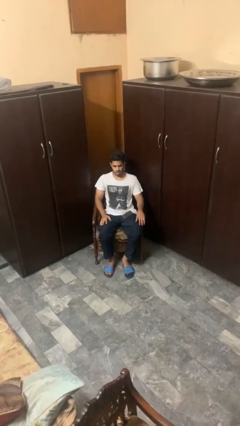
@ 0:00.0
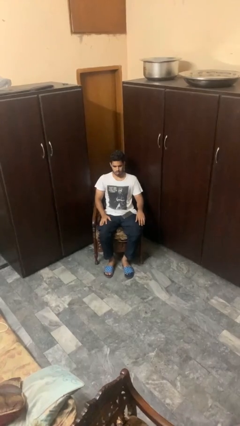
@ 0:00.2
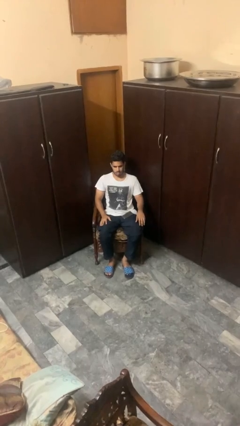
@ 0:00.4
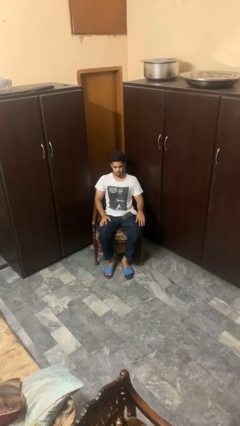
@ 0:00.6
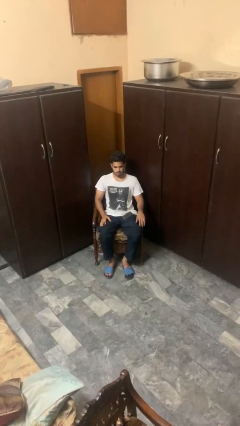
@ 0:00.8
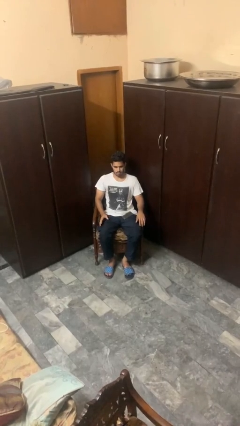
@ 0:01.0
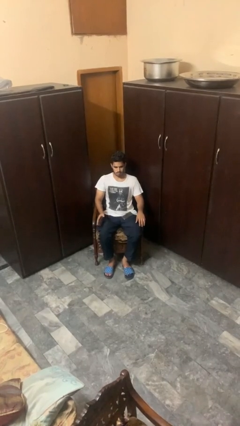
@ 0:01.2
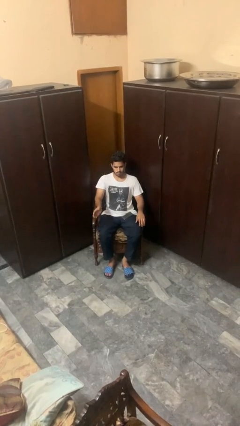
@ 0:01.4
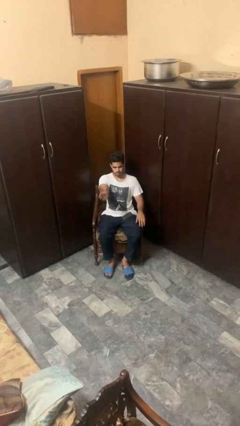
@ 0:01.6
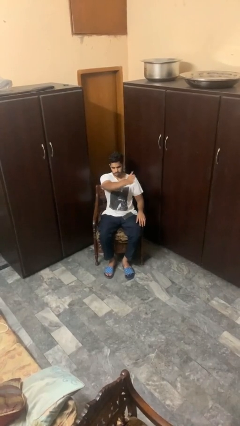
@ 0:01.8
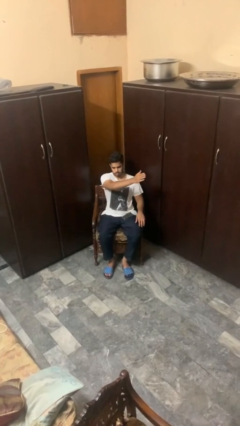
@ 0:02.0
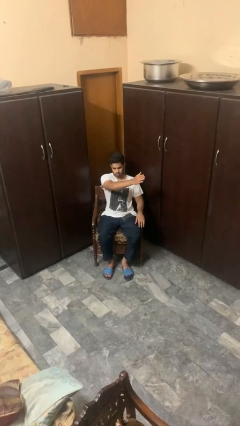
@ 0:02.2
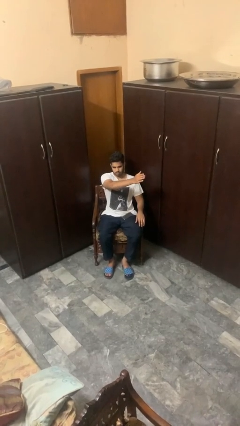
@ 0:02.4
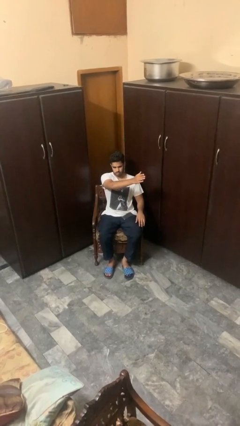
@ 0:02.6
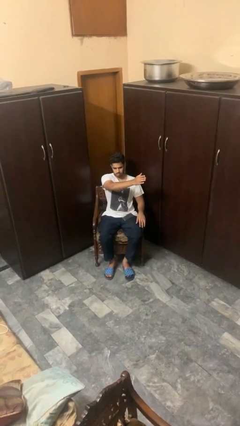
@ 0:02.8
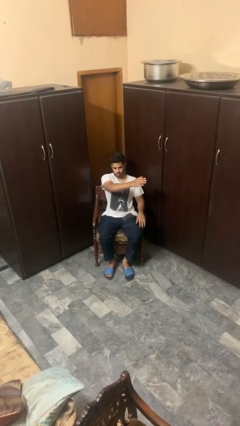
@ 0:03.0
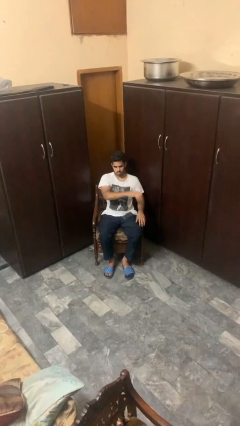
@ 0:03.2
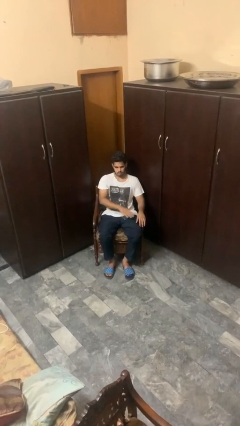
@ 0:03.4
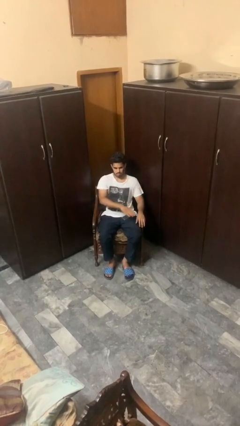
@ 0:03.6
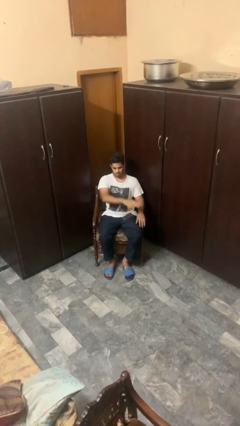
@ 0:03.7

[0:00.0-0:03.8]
person gestures swipe left

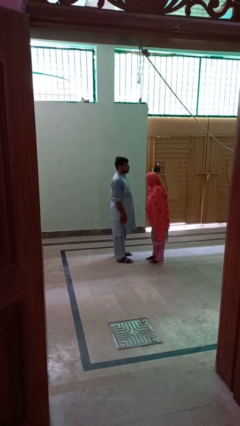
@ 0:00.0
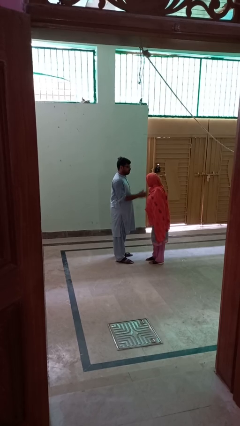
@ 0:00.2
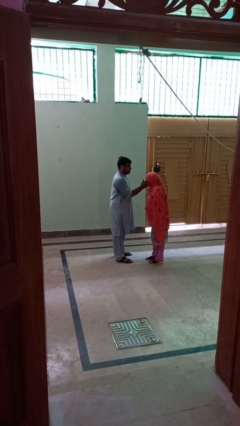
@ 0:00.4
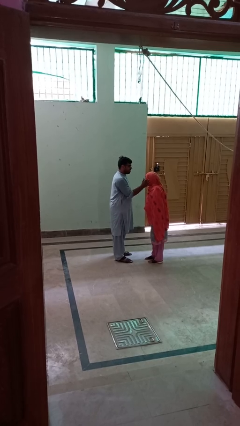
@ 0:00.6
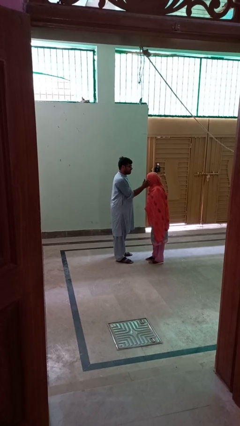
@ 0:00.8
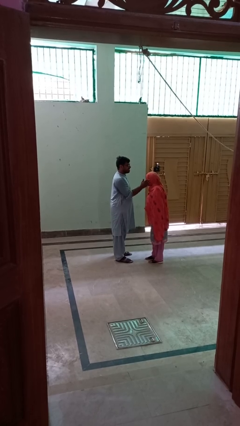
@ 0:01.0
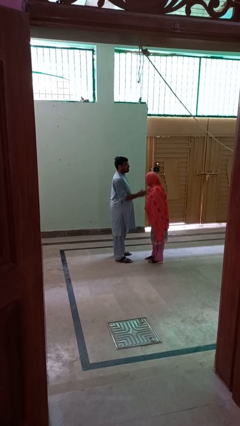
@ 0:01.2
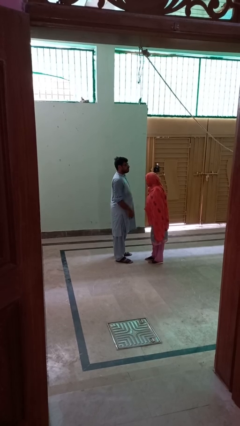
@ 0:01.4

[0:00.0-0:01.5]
person touches face of person

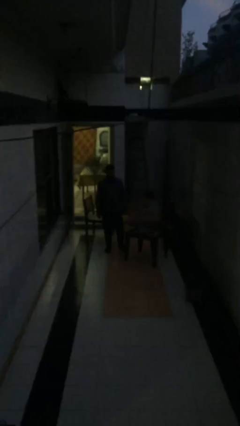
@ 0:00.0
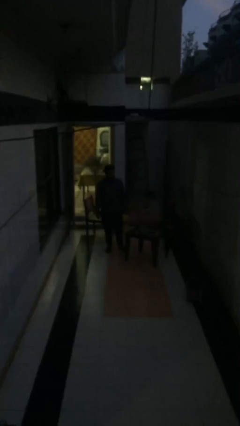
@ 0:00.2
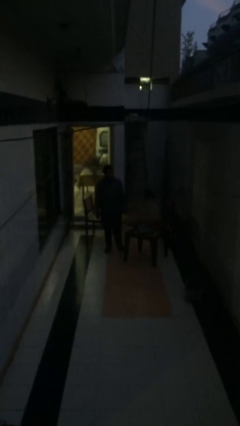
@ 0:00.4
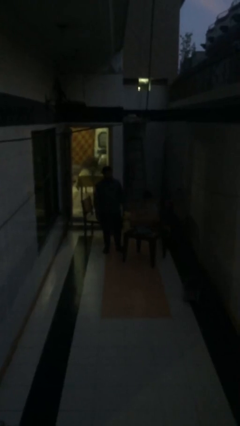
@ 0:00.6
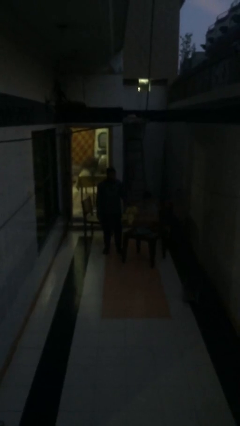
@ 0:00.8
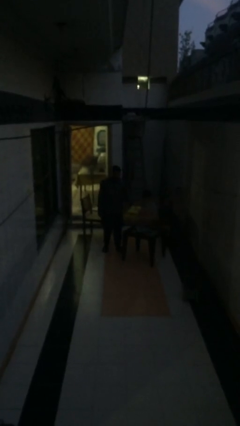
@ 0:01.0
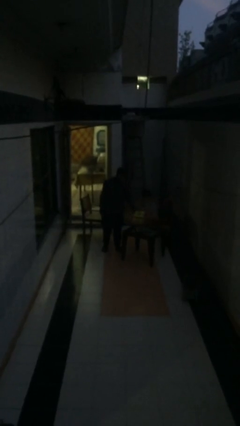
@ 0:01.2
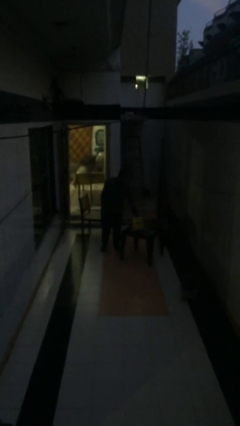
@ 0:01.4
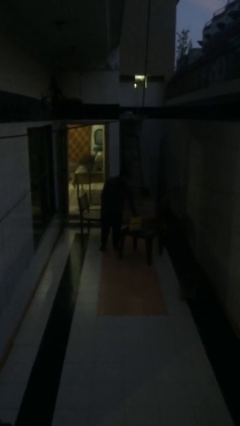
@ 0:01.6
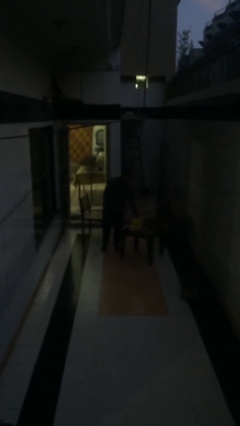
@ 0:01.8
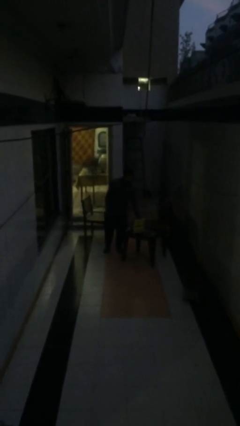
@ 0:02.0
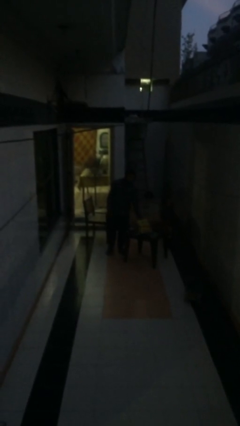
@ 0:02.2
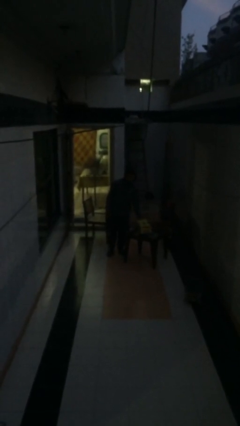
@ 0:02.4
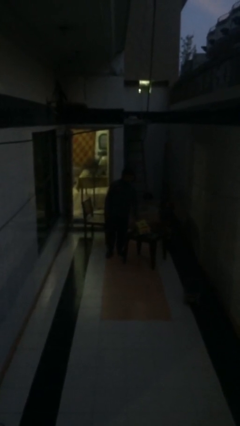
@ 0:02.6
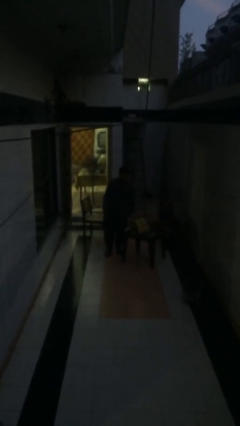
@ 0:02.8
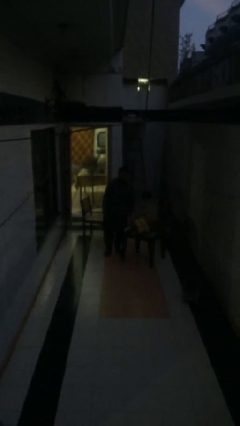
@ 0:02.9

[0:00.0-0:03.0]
person puts down object on table

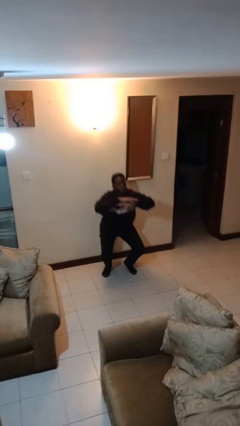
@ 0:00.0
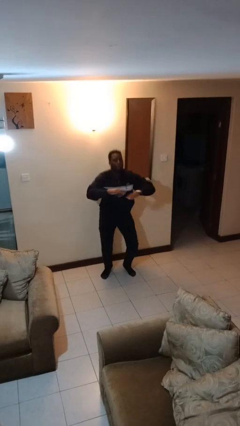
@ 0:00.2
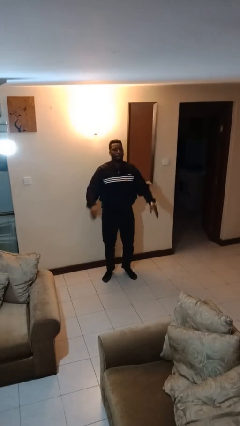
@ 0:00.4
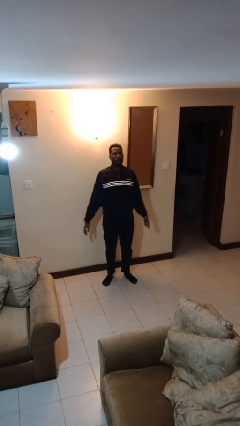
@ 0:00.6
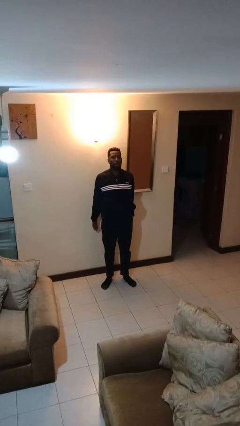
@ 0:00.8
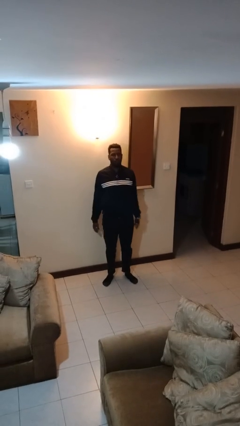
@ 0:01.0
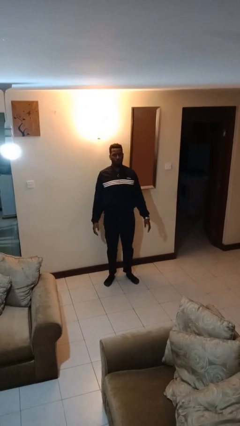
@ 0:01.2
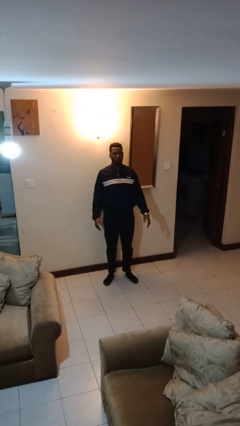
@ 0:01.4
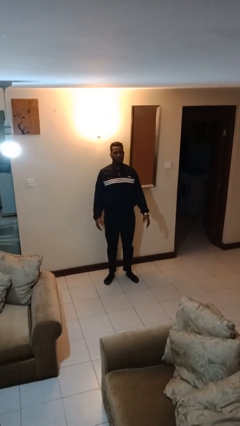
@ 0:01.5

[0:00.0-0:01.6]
person stands up

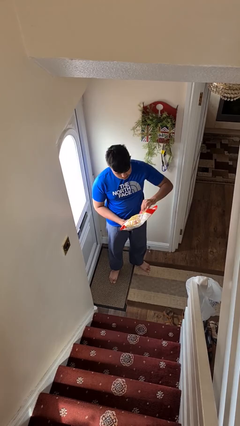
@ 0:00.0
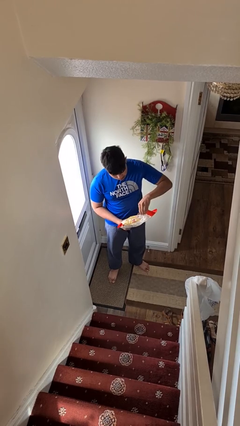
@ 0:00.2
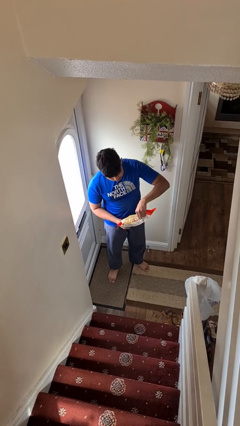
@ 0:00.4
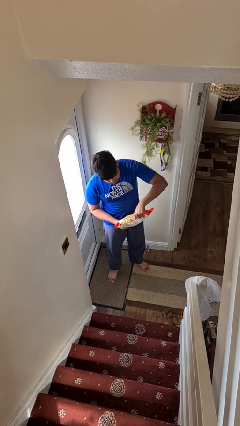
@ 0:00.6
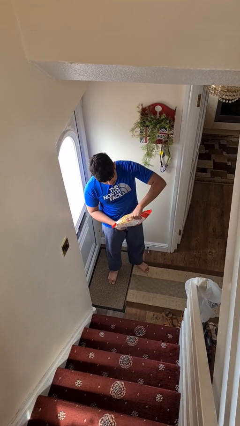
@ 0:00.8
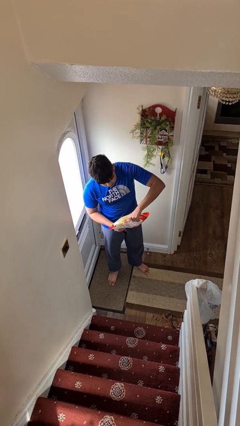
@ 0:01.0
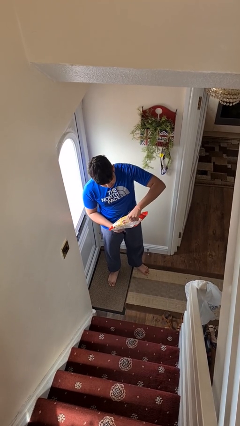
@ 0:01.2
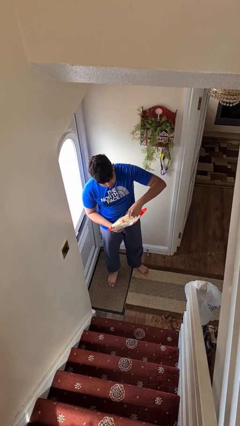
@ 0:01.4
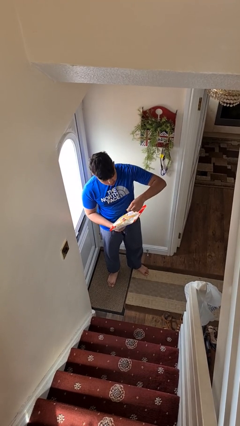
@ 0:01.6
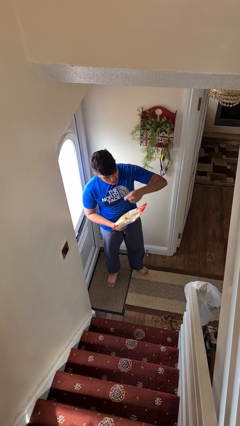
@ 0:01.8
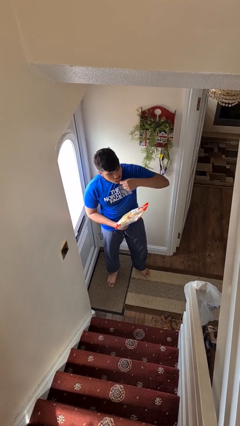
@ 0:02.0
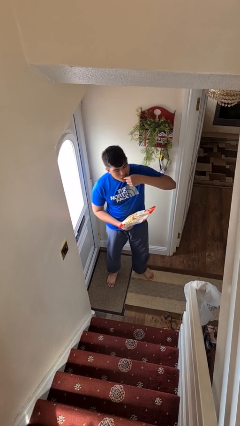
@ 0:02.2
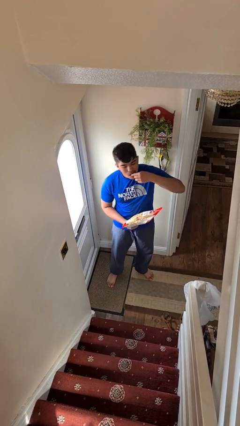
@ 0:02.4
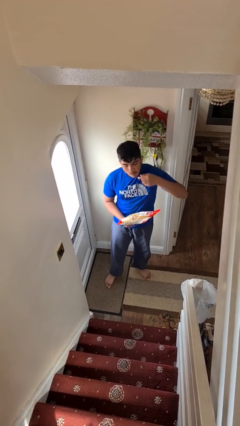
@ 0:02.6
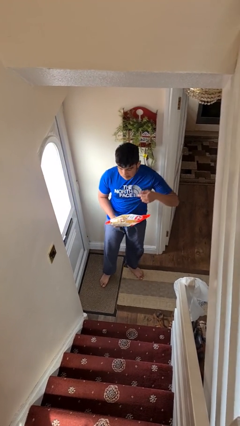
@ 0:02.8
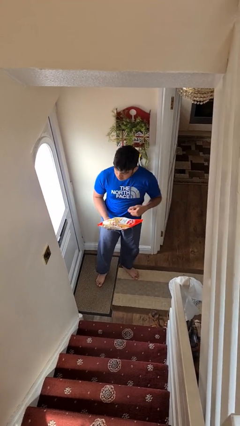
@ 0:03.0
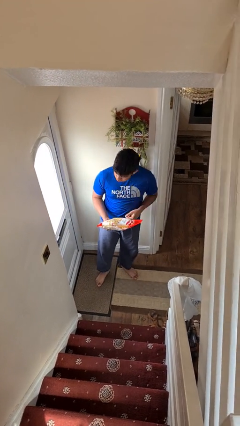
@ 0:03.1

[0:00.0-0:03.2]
person eats snack from bag

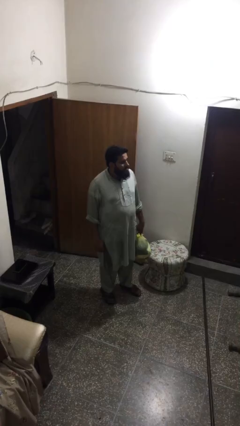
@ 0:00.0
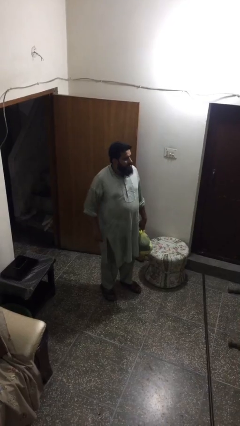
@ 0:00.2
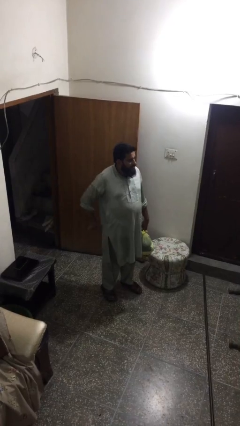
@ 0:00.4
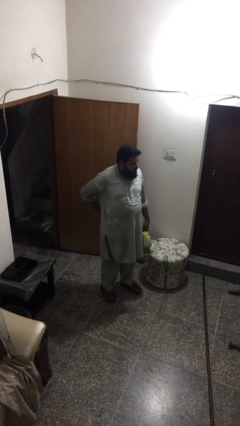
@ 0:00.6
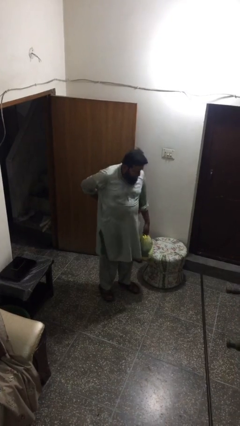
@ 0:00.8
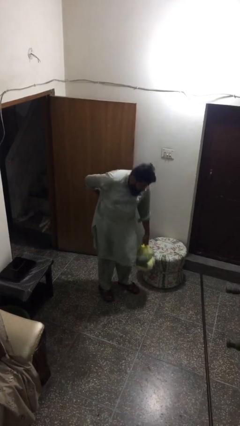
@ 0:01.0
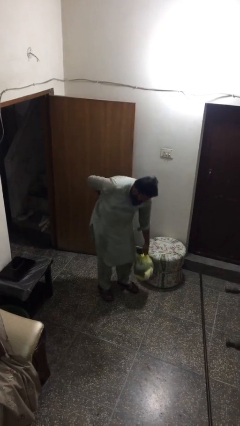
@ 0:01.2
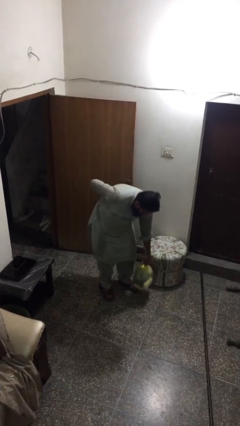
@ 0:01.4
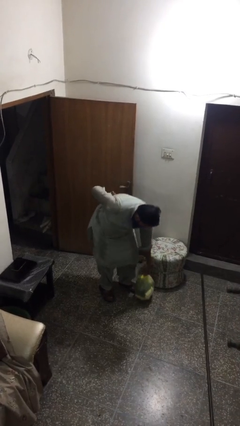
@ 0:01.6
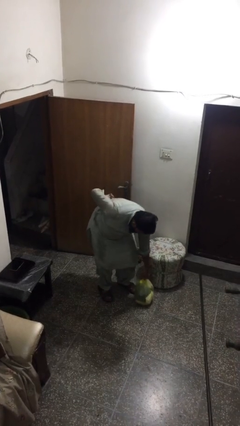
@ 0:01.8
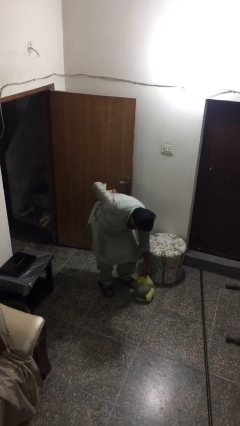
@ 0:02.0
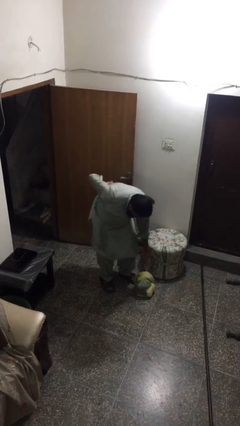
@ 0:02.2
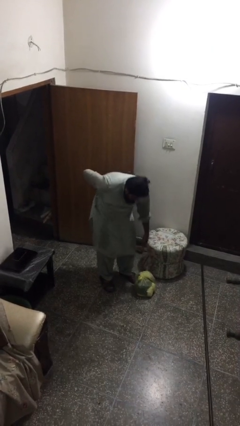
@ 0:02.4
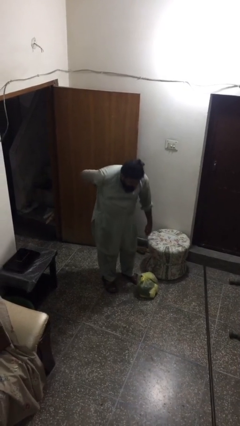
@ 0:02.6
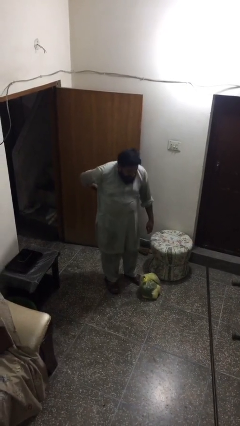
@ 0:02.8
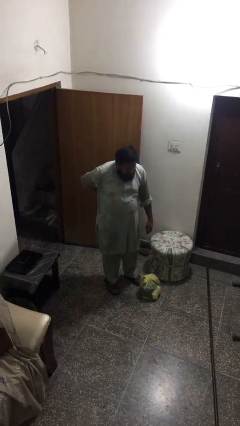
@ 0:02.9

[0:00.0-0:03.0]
person puts down object on floor

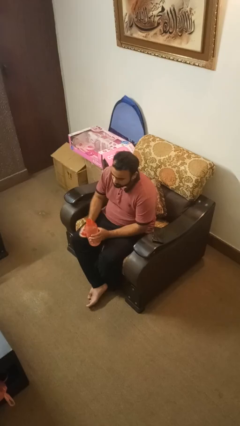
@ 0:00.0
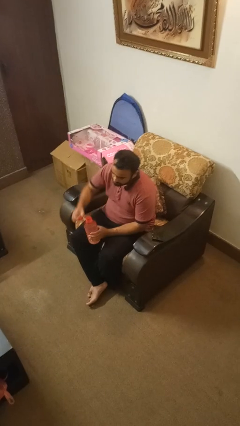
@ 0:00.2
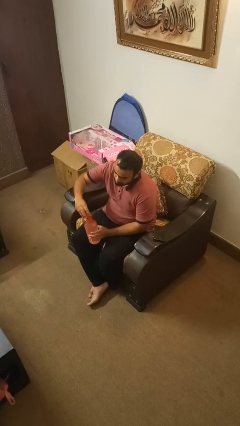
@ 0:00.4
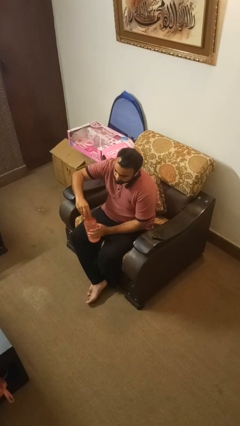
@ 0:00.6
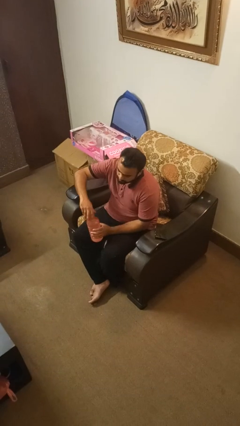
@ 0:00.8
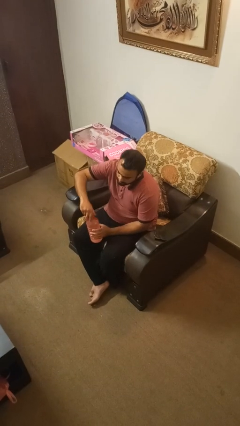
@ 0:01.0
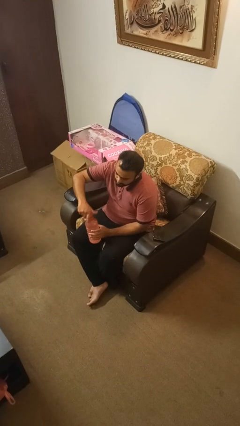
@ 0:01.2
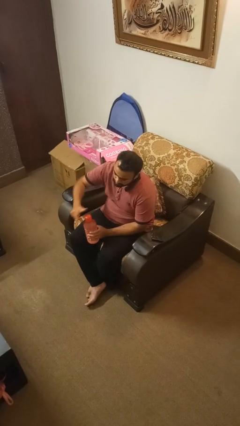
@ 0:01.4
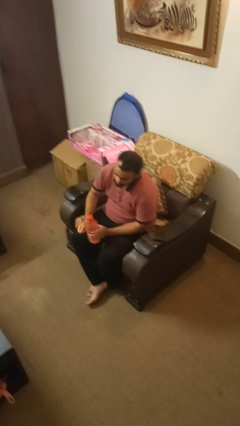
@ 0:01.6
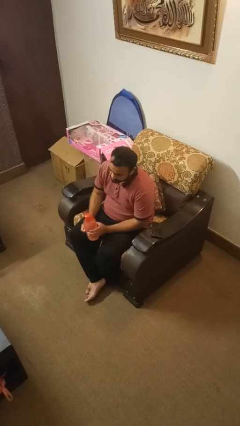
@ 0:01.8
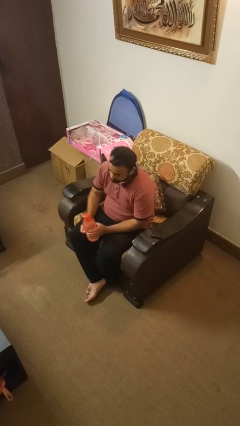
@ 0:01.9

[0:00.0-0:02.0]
person screws lid to bottle
